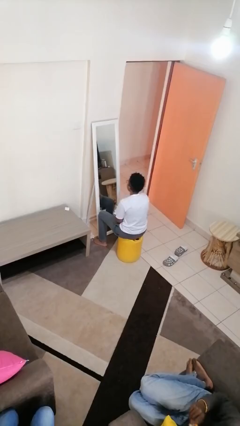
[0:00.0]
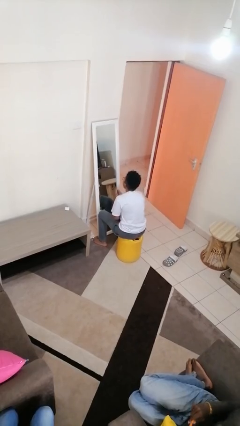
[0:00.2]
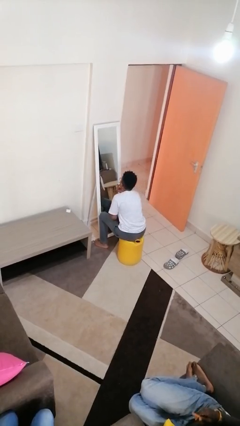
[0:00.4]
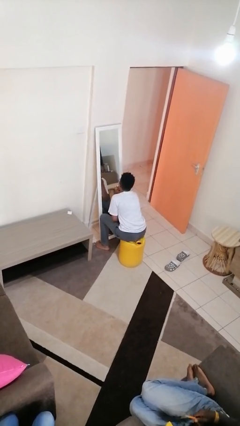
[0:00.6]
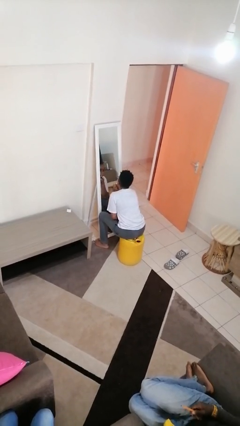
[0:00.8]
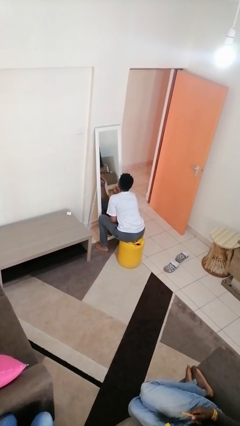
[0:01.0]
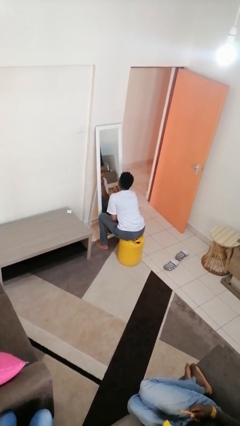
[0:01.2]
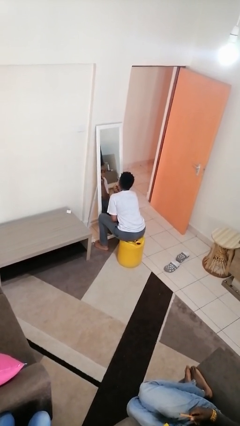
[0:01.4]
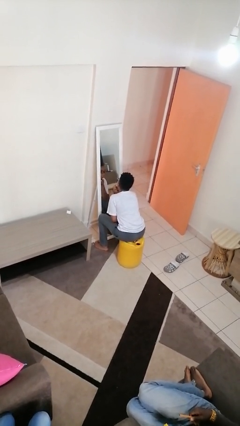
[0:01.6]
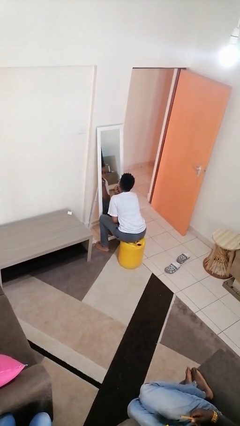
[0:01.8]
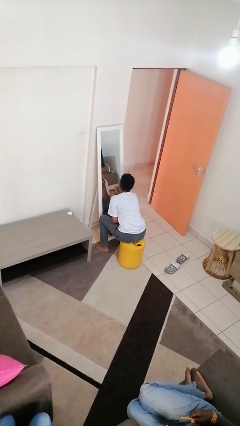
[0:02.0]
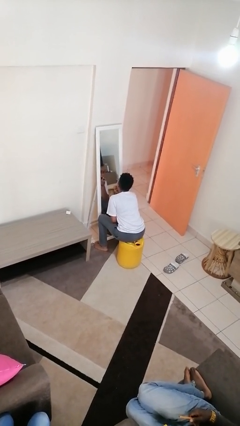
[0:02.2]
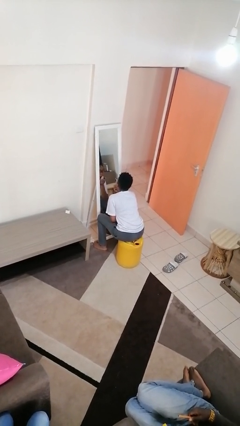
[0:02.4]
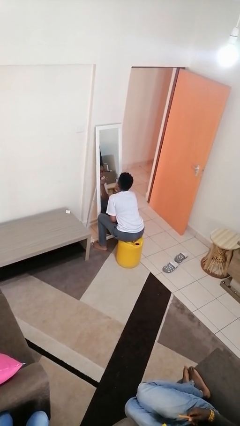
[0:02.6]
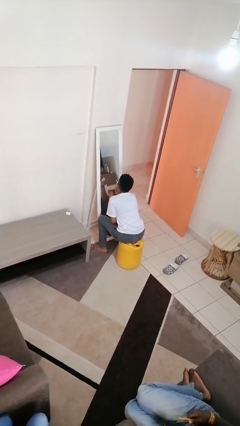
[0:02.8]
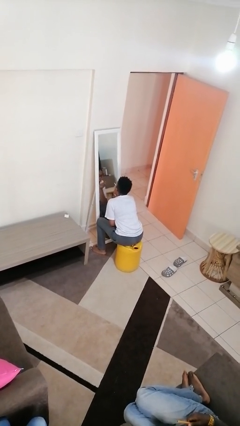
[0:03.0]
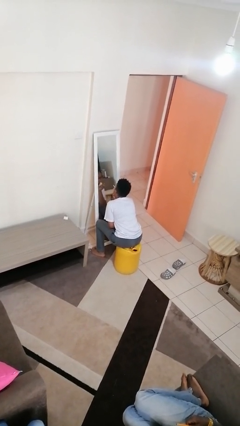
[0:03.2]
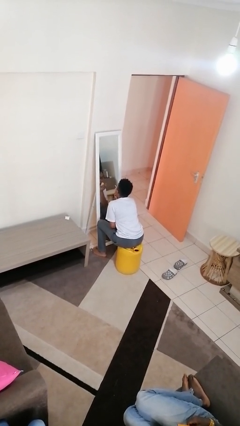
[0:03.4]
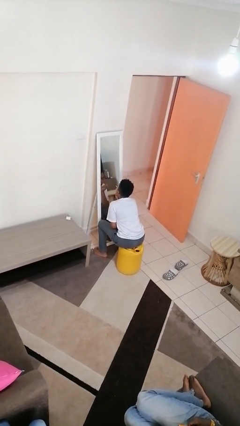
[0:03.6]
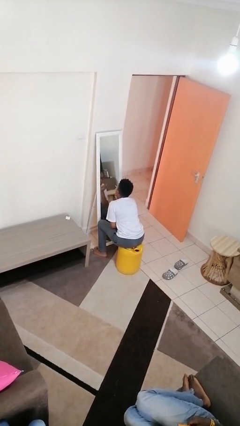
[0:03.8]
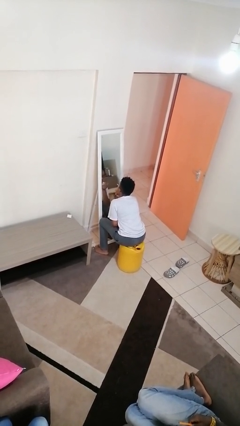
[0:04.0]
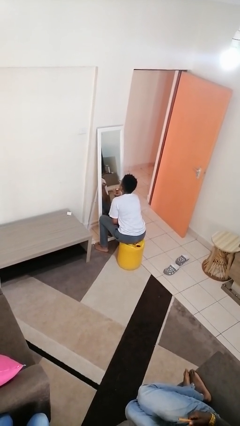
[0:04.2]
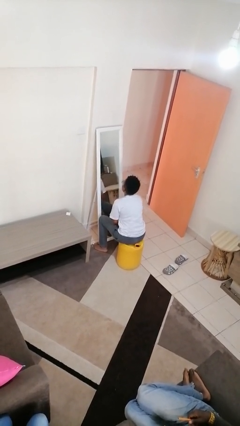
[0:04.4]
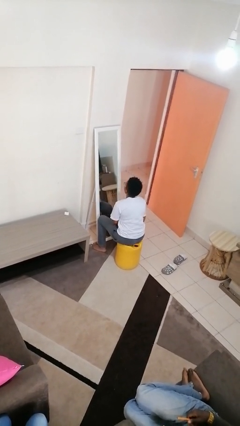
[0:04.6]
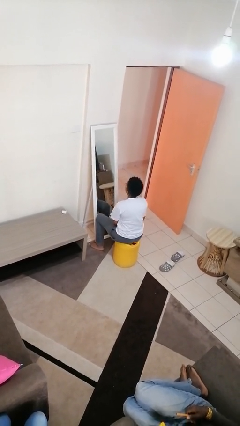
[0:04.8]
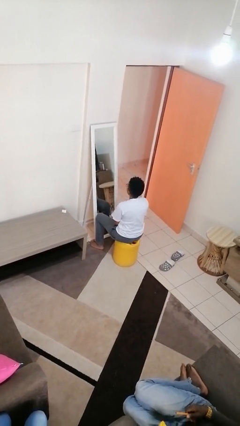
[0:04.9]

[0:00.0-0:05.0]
person applies lip makeup

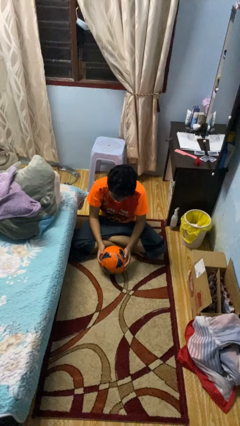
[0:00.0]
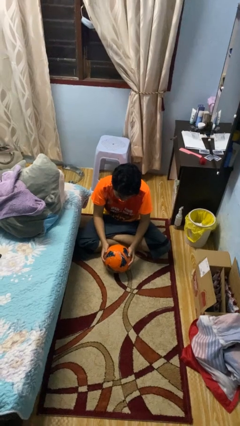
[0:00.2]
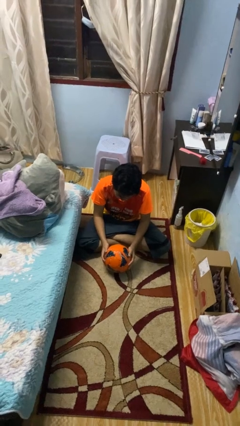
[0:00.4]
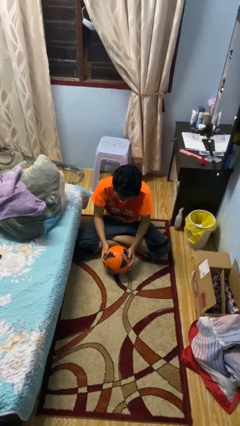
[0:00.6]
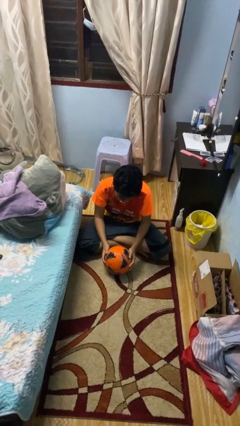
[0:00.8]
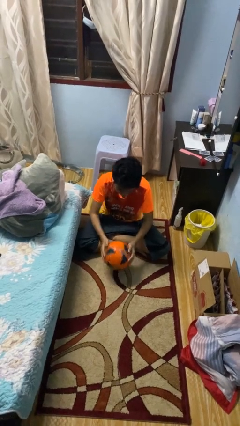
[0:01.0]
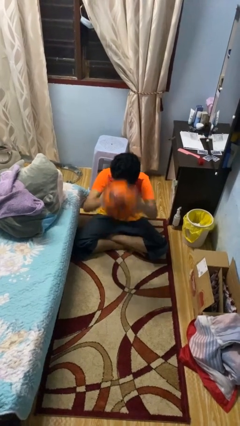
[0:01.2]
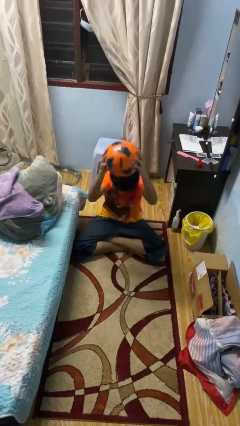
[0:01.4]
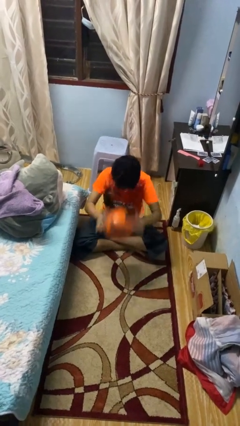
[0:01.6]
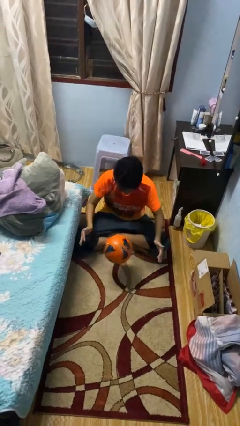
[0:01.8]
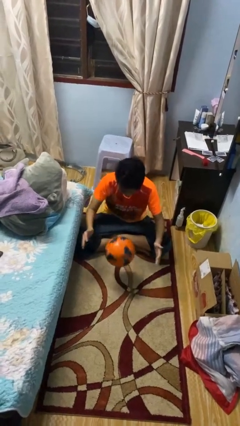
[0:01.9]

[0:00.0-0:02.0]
person bounces ball on floor

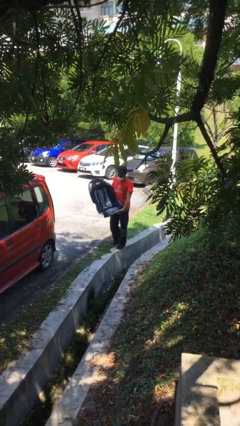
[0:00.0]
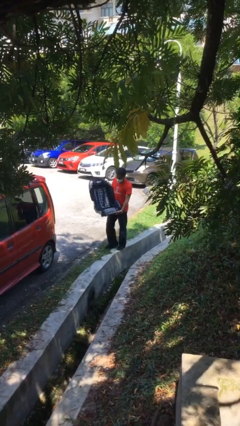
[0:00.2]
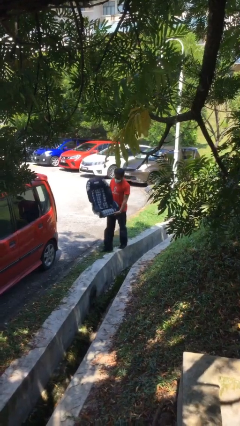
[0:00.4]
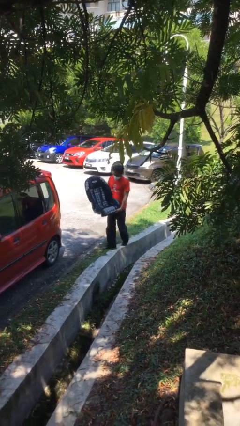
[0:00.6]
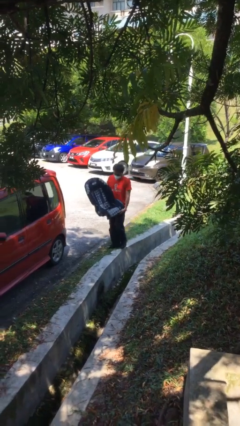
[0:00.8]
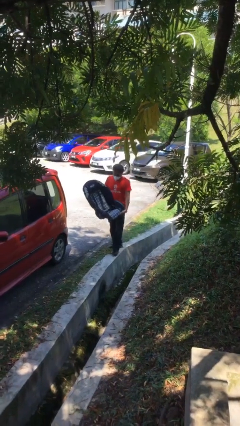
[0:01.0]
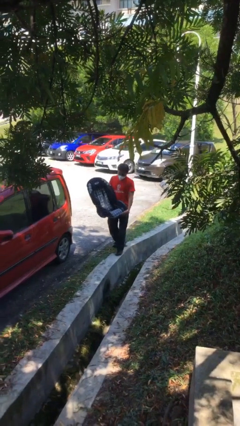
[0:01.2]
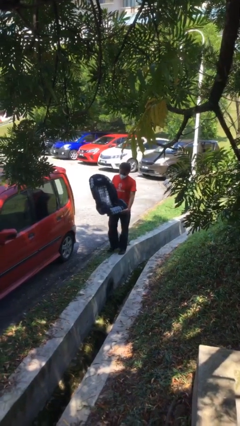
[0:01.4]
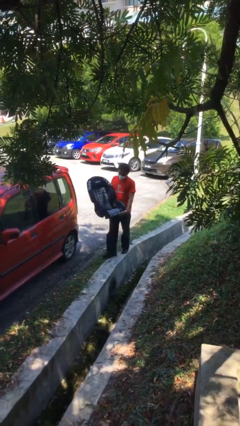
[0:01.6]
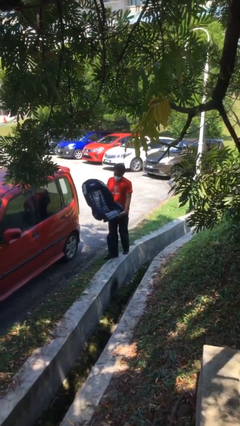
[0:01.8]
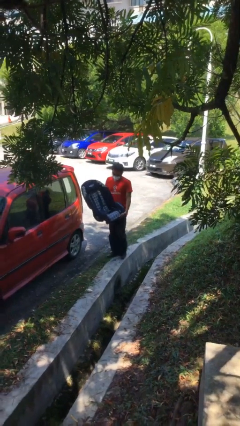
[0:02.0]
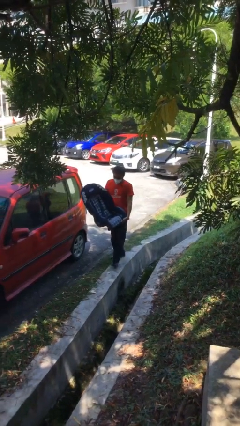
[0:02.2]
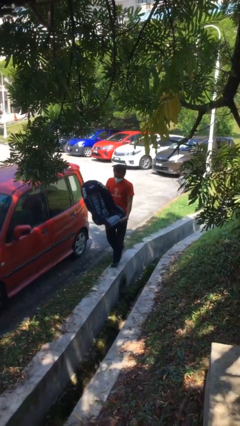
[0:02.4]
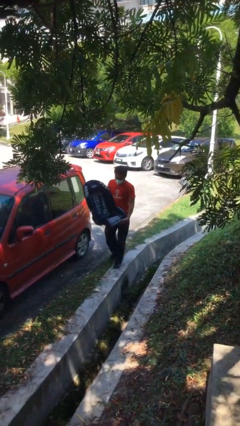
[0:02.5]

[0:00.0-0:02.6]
person carries heavy object

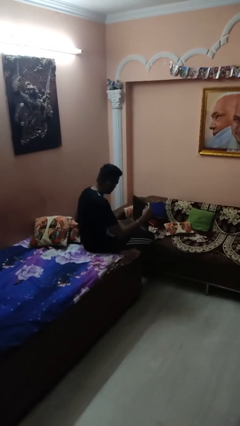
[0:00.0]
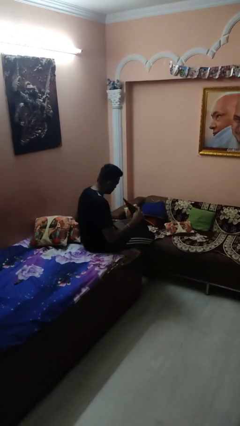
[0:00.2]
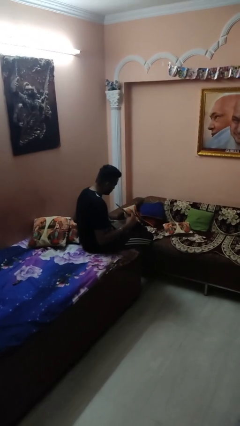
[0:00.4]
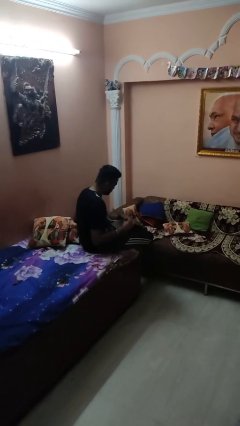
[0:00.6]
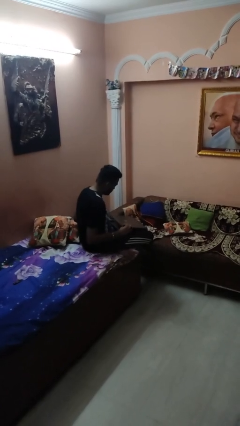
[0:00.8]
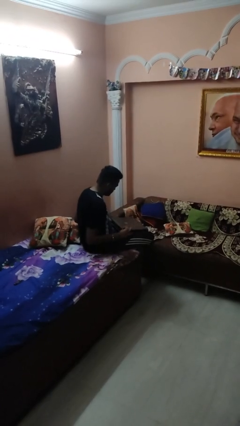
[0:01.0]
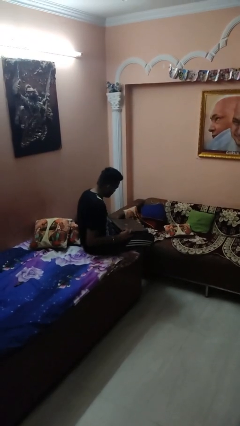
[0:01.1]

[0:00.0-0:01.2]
person closes laptop

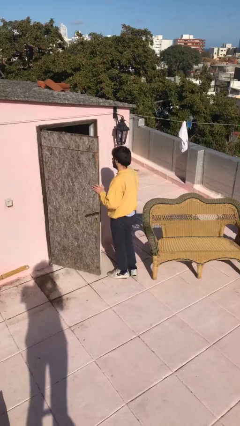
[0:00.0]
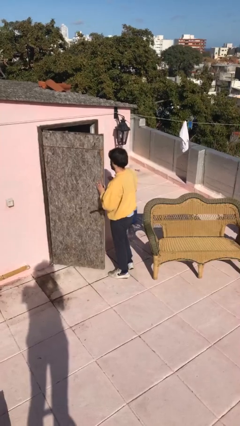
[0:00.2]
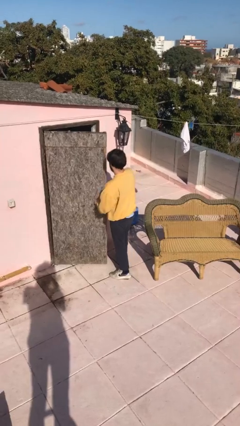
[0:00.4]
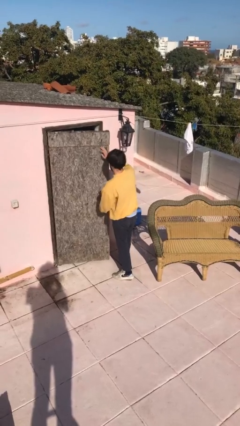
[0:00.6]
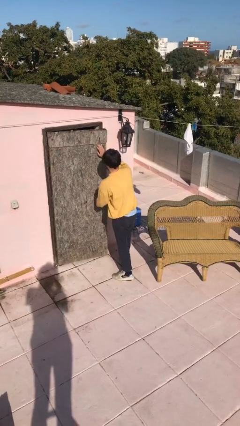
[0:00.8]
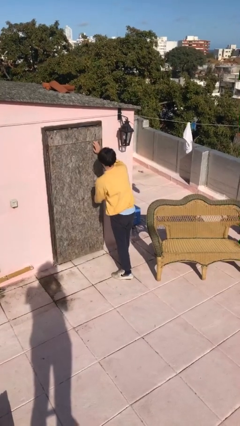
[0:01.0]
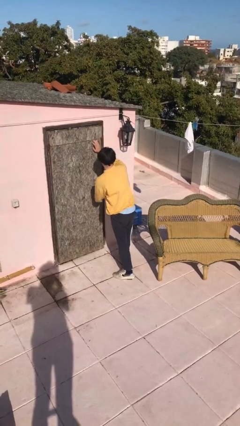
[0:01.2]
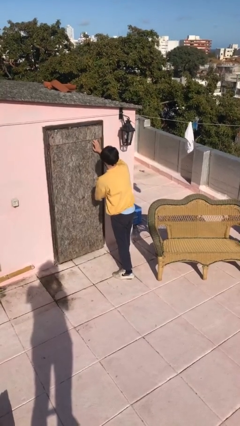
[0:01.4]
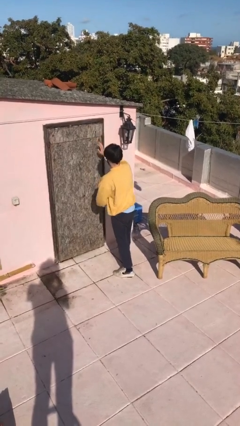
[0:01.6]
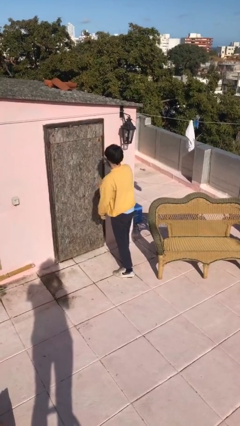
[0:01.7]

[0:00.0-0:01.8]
person closes facility door

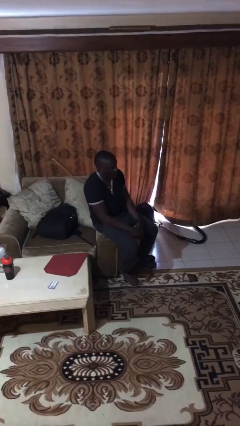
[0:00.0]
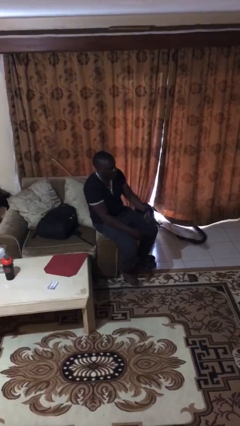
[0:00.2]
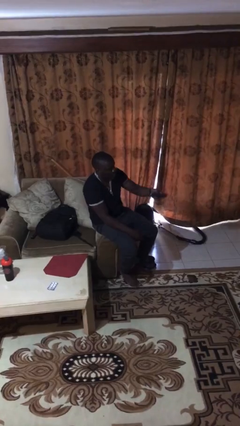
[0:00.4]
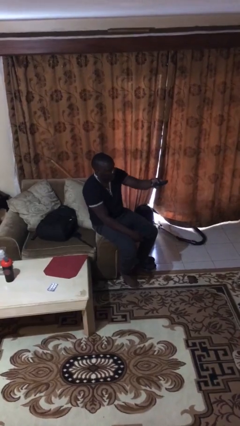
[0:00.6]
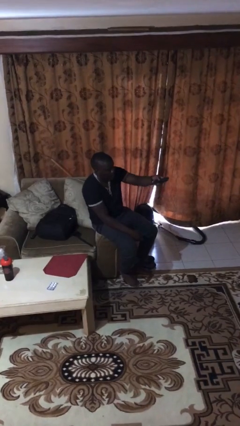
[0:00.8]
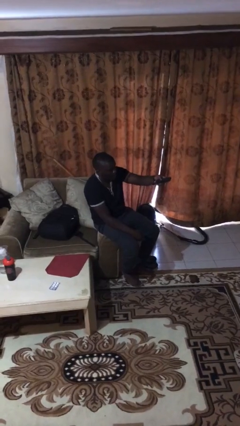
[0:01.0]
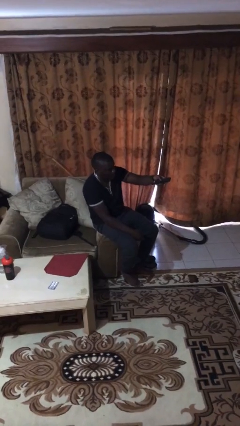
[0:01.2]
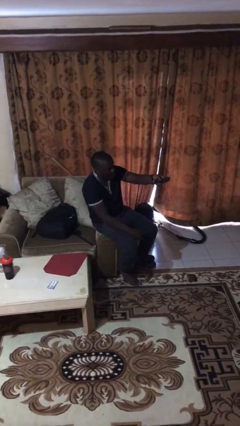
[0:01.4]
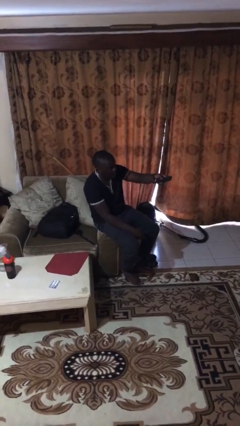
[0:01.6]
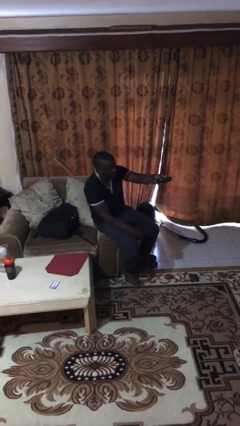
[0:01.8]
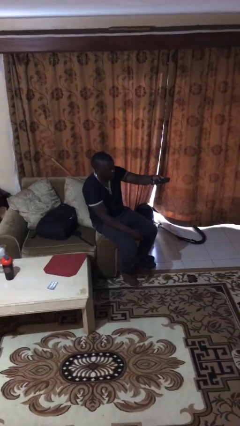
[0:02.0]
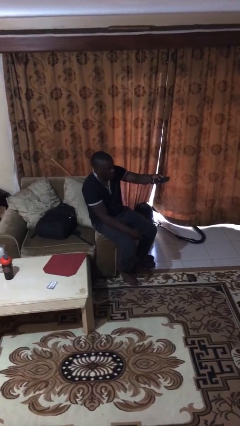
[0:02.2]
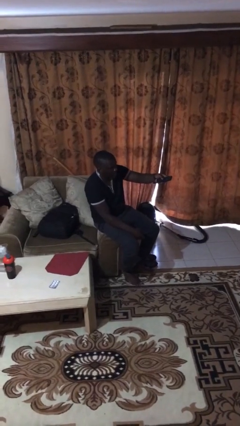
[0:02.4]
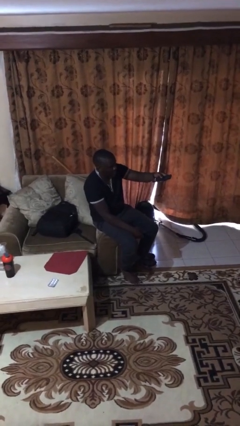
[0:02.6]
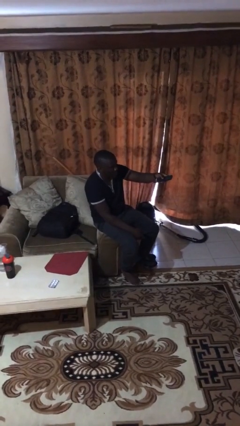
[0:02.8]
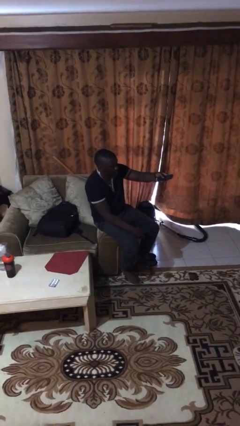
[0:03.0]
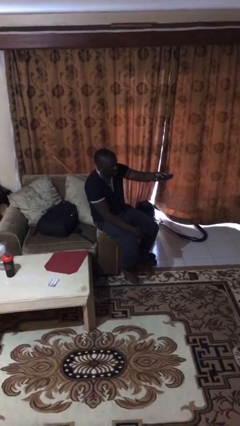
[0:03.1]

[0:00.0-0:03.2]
person uses television remote

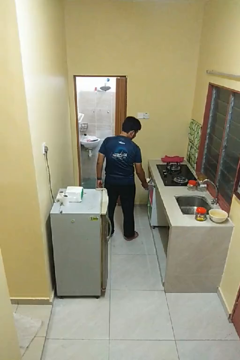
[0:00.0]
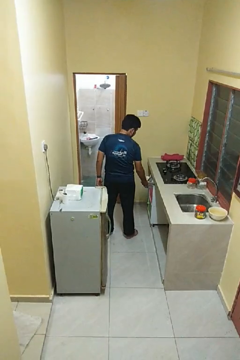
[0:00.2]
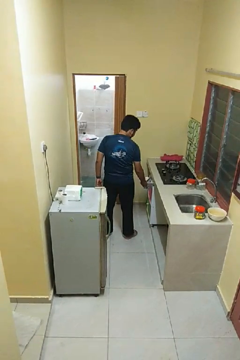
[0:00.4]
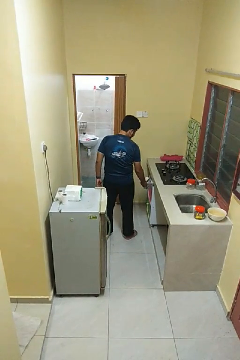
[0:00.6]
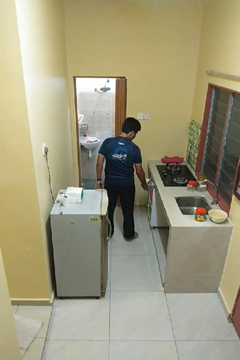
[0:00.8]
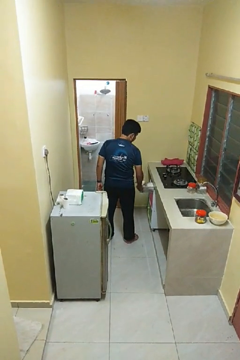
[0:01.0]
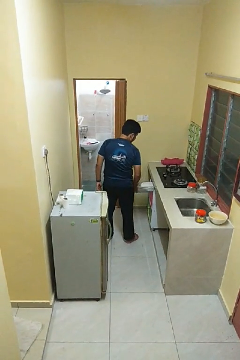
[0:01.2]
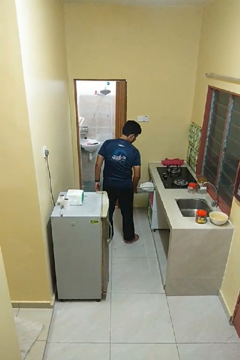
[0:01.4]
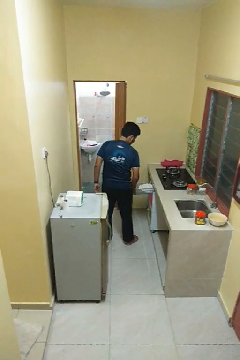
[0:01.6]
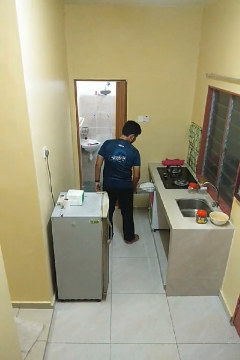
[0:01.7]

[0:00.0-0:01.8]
person opens kitchen drawer

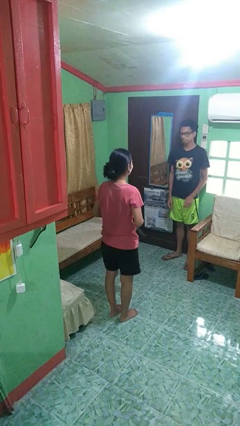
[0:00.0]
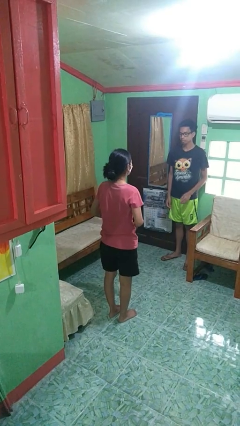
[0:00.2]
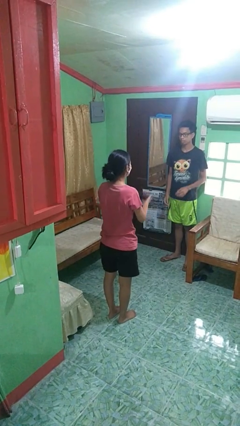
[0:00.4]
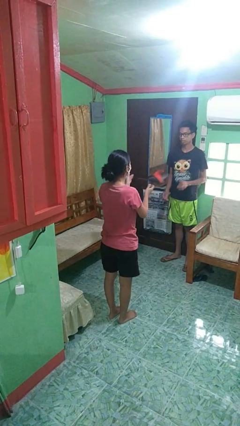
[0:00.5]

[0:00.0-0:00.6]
person throws object to person
